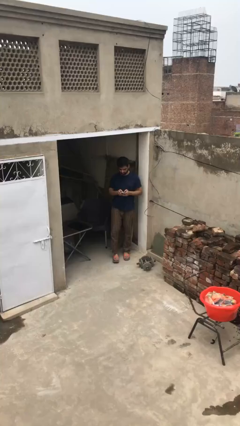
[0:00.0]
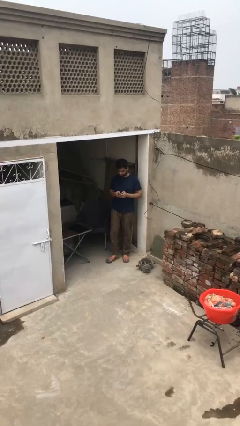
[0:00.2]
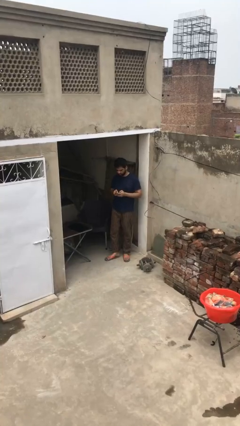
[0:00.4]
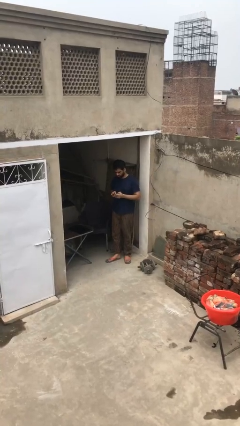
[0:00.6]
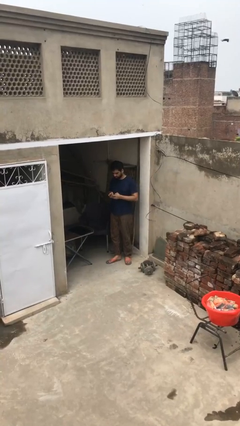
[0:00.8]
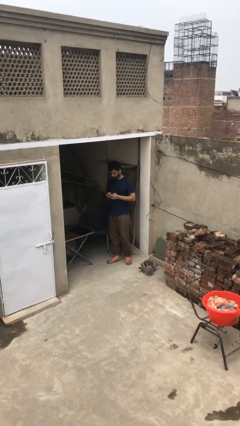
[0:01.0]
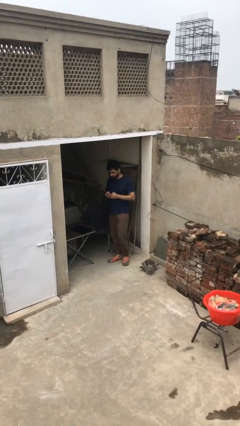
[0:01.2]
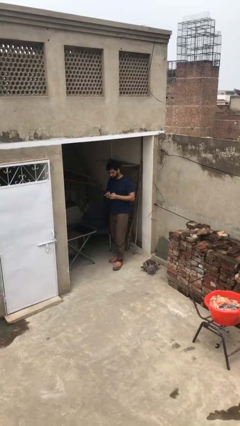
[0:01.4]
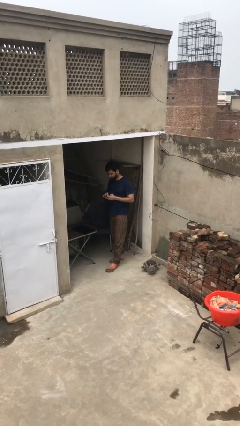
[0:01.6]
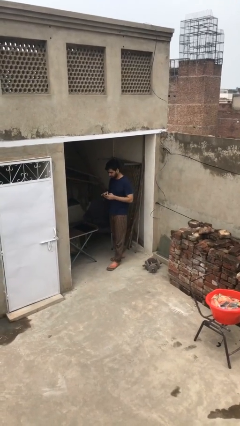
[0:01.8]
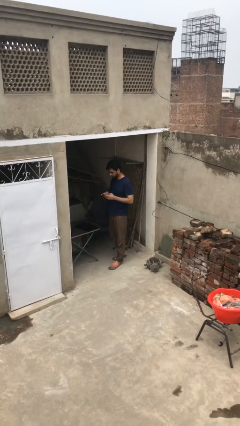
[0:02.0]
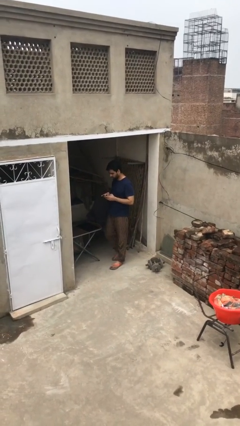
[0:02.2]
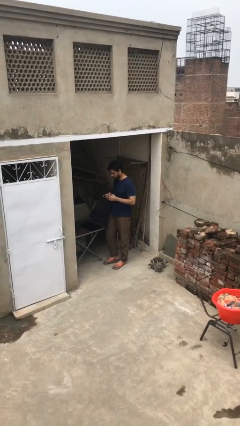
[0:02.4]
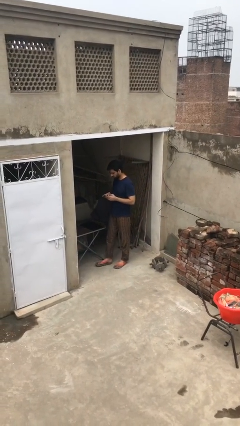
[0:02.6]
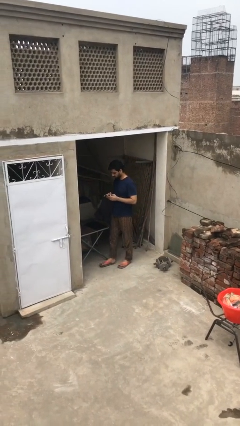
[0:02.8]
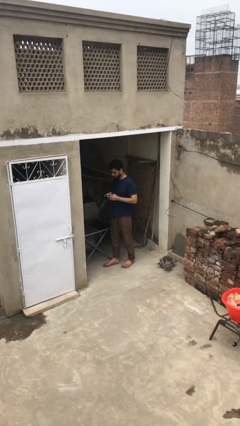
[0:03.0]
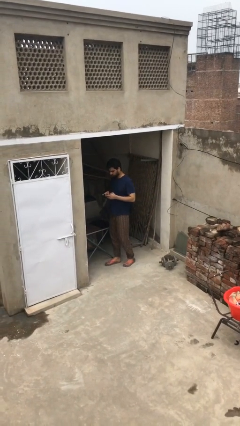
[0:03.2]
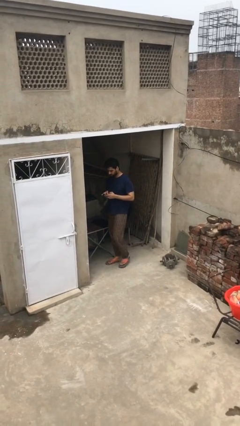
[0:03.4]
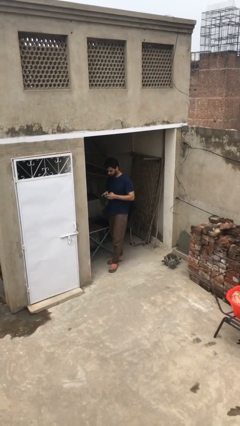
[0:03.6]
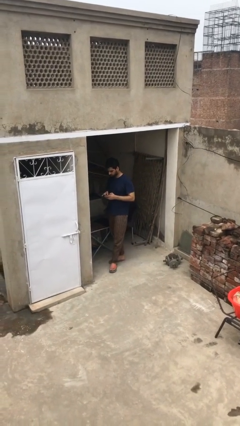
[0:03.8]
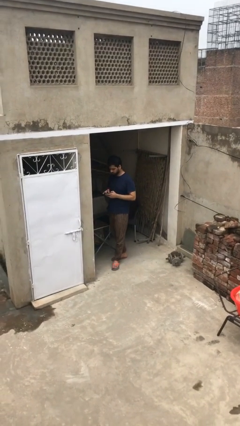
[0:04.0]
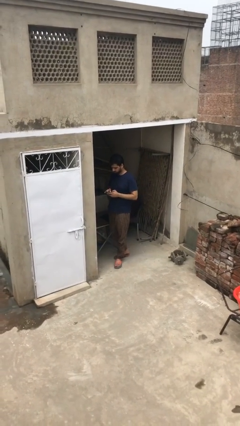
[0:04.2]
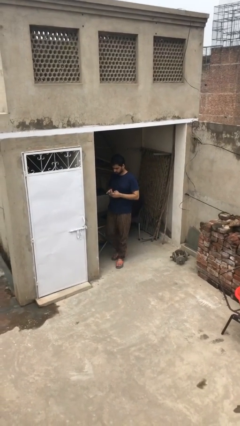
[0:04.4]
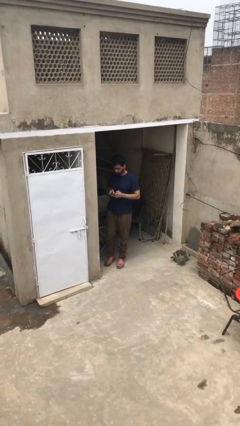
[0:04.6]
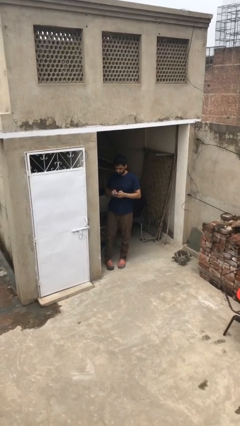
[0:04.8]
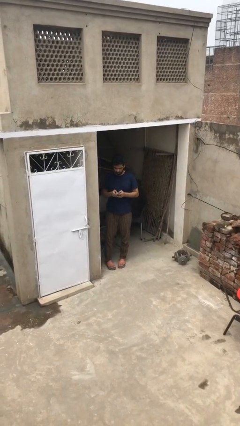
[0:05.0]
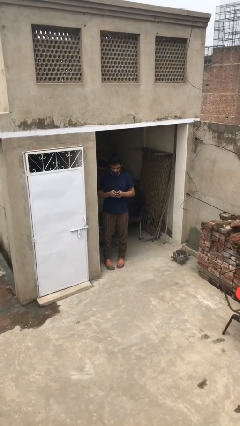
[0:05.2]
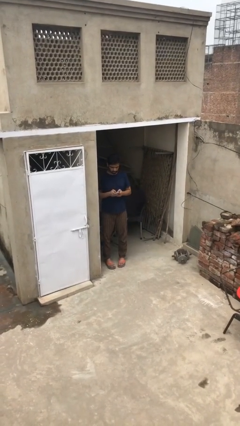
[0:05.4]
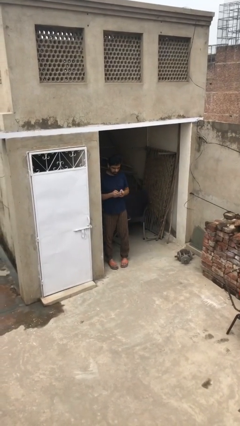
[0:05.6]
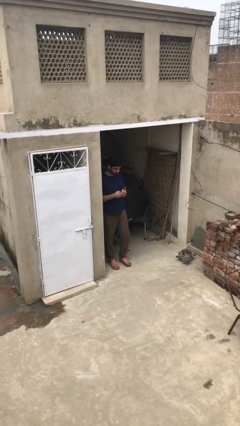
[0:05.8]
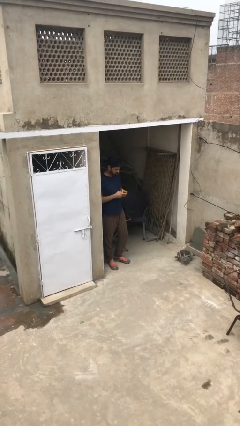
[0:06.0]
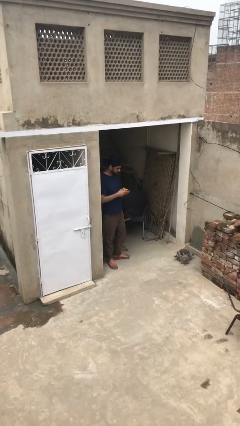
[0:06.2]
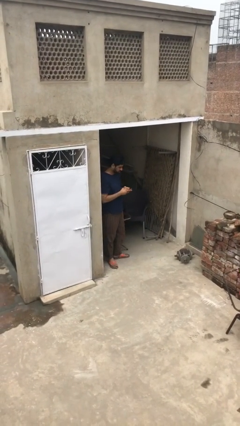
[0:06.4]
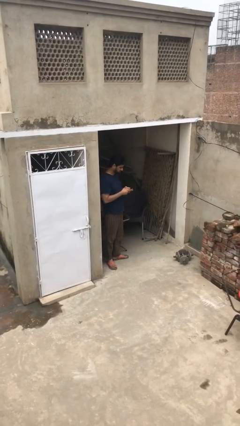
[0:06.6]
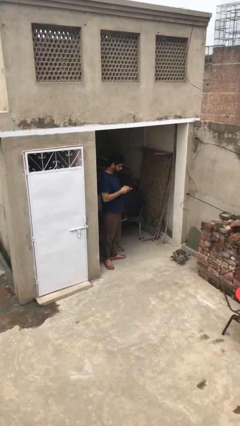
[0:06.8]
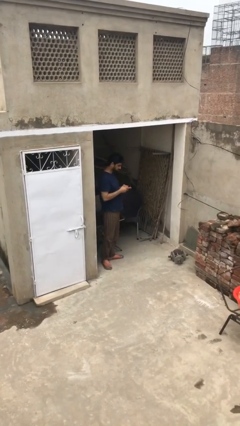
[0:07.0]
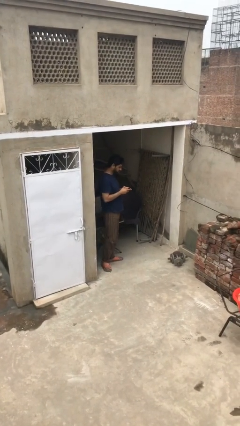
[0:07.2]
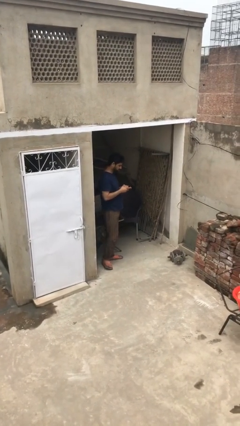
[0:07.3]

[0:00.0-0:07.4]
person texts on phone

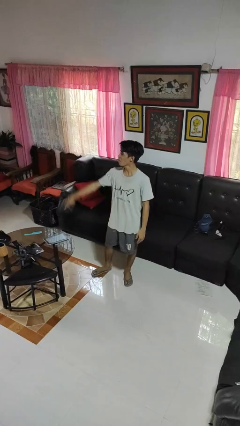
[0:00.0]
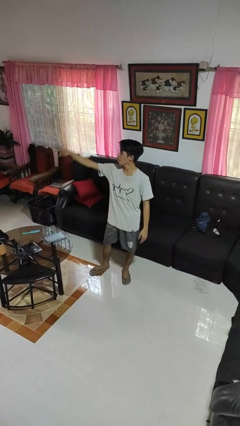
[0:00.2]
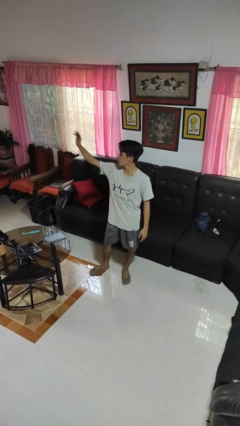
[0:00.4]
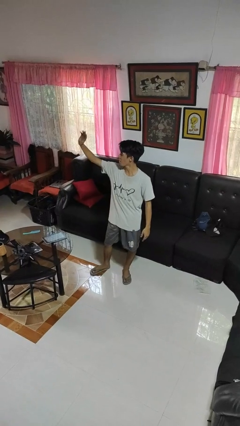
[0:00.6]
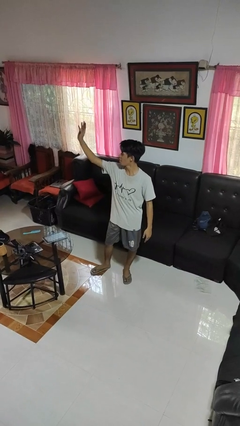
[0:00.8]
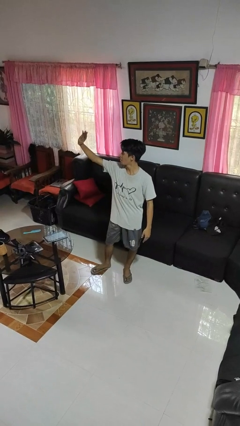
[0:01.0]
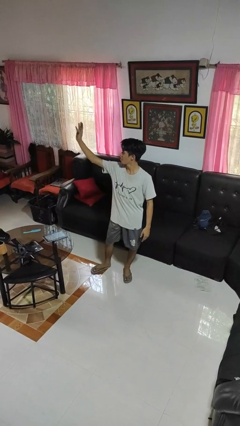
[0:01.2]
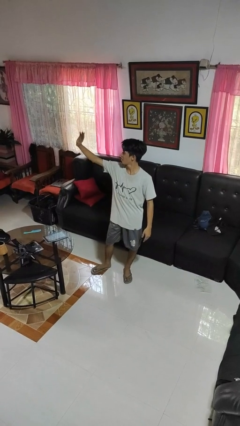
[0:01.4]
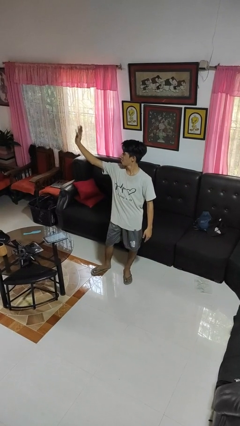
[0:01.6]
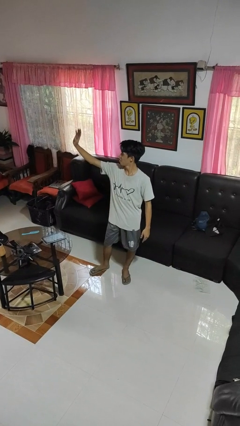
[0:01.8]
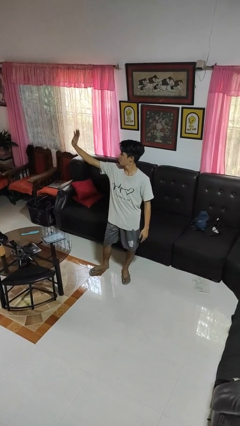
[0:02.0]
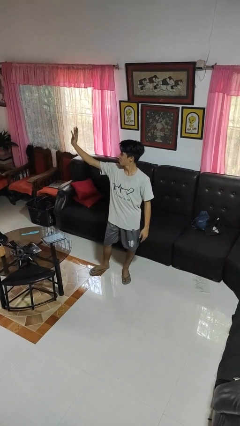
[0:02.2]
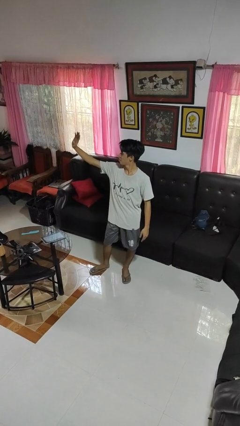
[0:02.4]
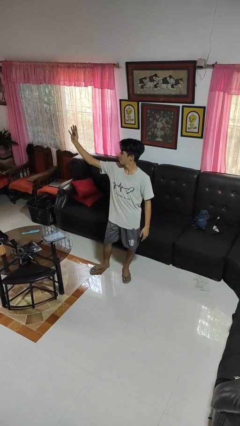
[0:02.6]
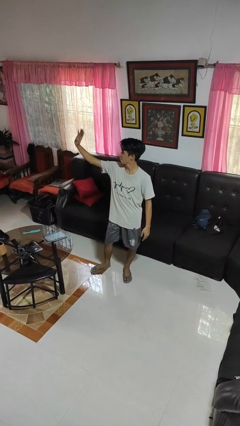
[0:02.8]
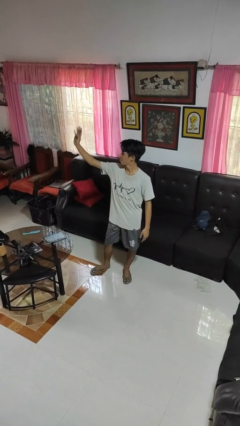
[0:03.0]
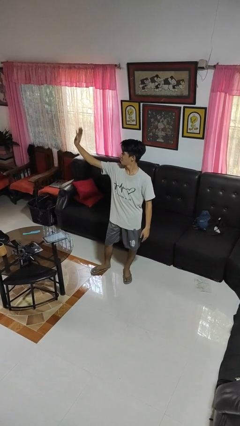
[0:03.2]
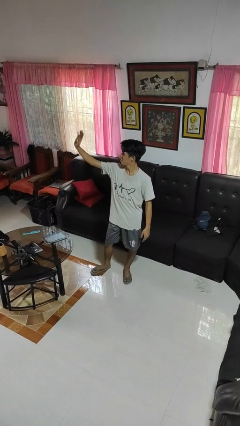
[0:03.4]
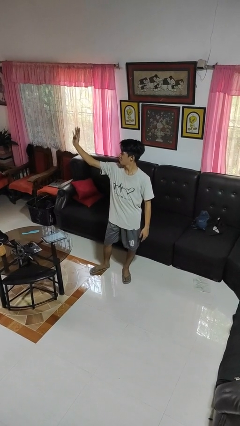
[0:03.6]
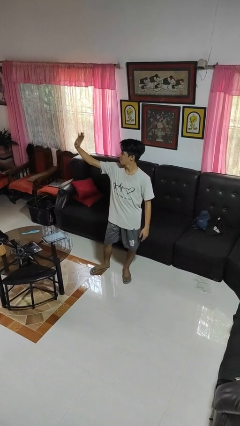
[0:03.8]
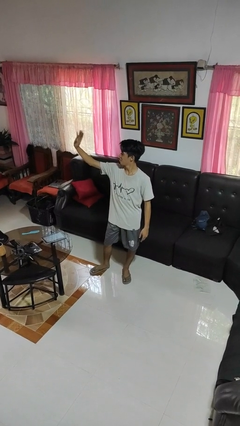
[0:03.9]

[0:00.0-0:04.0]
person waves at person

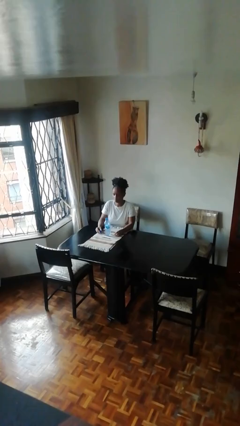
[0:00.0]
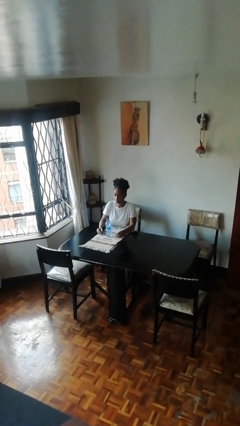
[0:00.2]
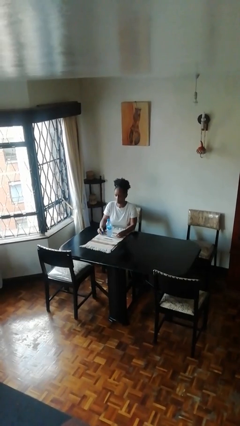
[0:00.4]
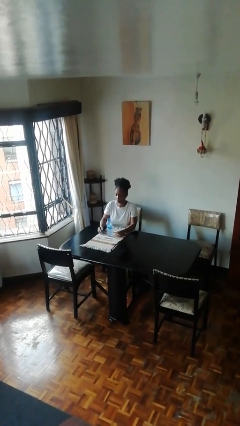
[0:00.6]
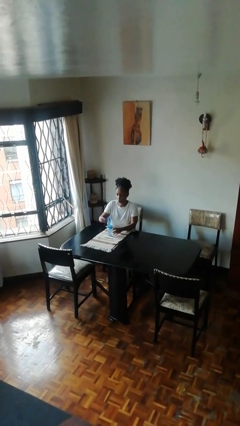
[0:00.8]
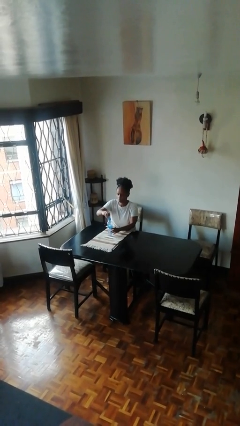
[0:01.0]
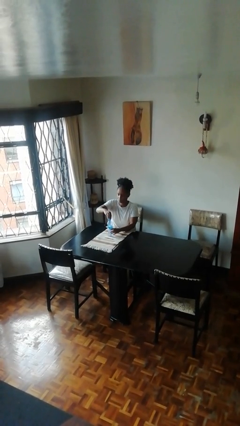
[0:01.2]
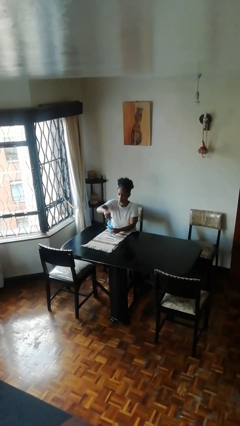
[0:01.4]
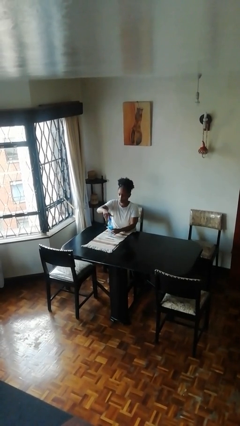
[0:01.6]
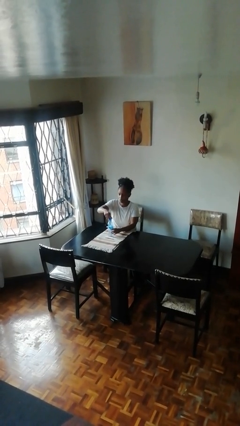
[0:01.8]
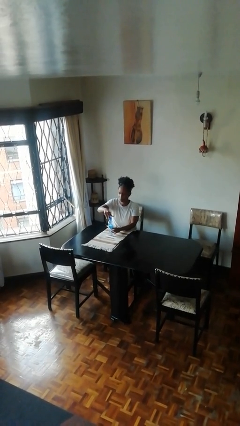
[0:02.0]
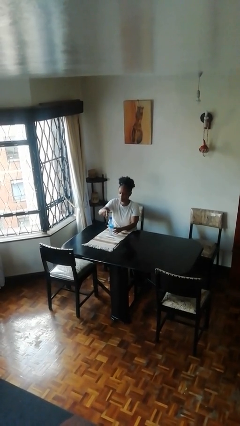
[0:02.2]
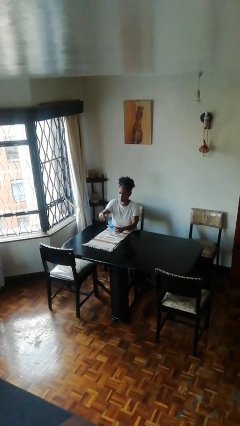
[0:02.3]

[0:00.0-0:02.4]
person screws lid to bottle

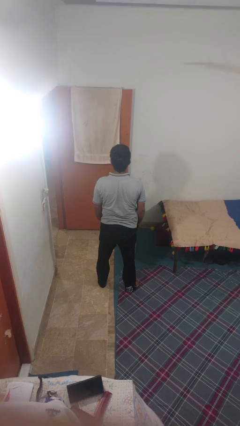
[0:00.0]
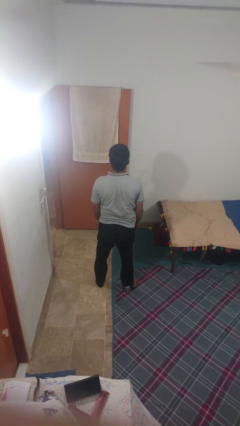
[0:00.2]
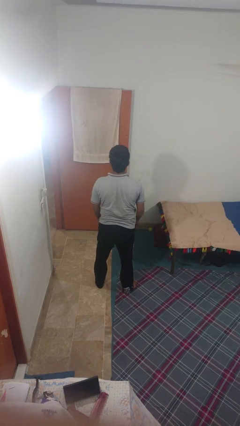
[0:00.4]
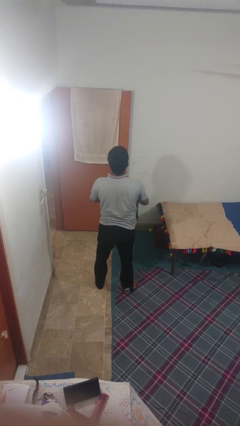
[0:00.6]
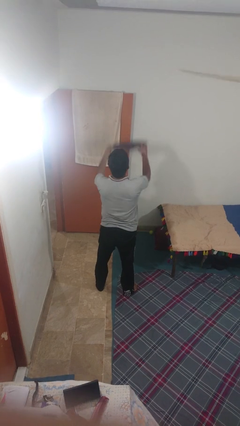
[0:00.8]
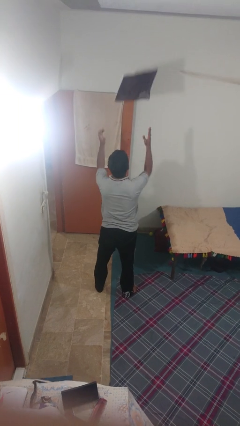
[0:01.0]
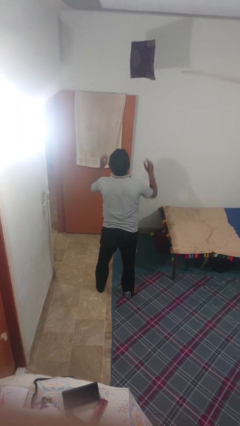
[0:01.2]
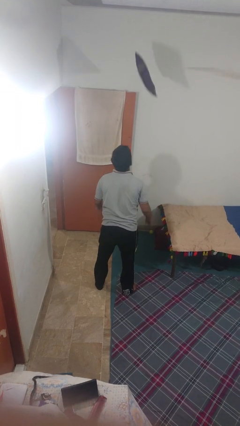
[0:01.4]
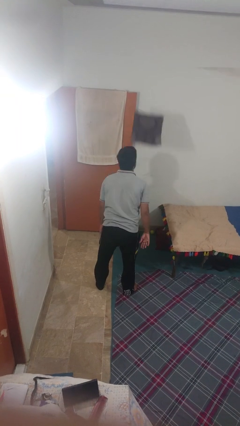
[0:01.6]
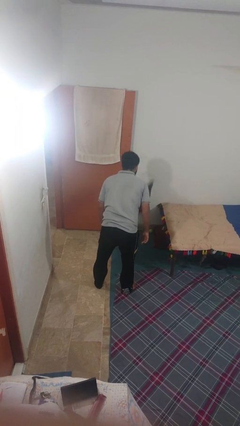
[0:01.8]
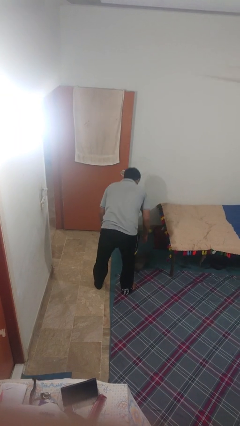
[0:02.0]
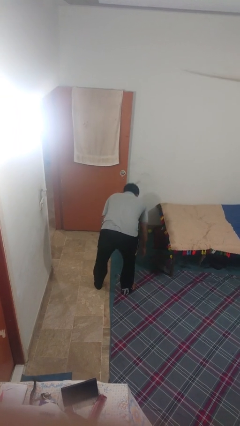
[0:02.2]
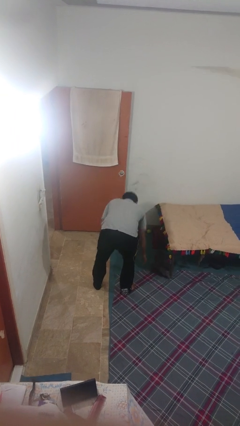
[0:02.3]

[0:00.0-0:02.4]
person throws object into air

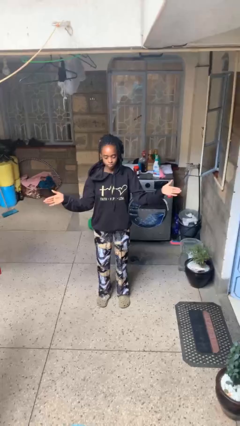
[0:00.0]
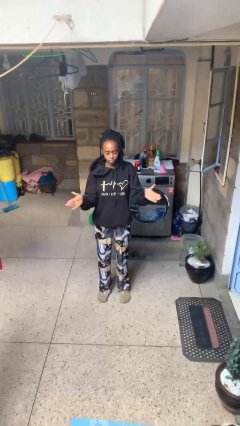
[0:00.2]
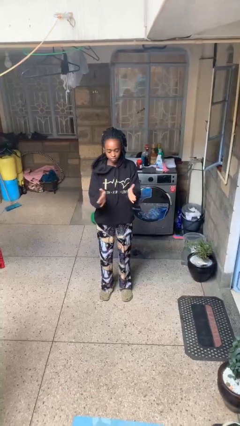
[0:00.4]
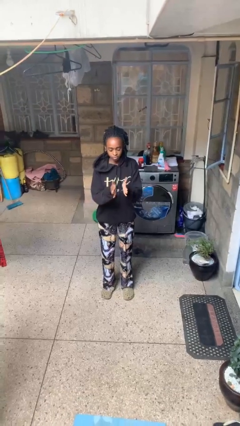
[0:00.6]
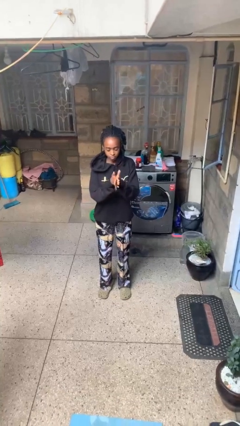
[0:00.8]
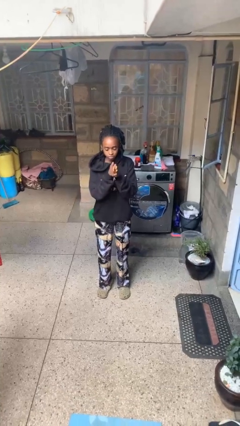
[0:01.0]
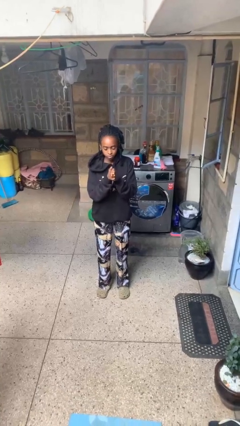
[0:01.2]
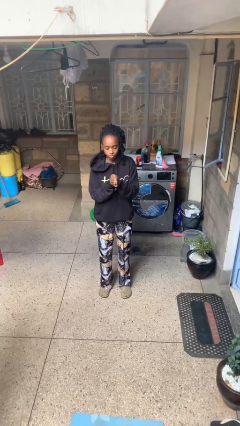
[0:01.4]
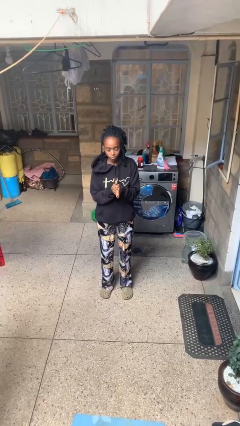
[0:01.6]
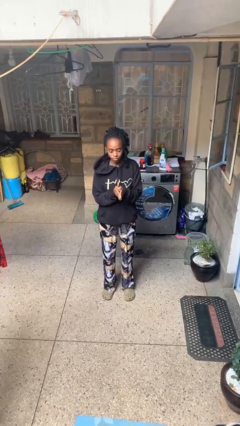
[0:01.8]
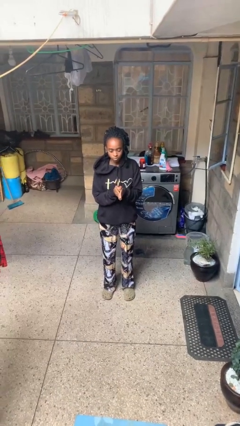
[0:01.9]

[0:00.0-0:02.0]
person gestures zoom out
